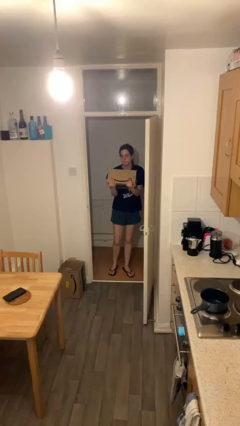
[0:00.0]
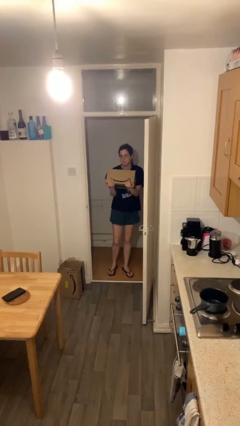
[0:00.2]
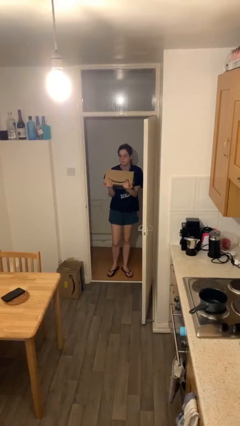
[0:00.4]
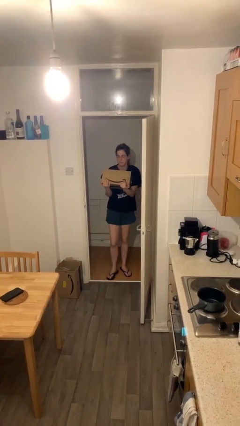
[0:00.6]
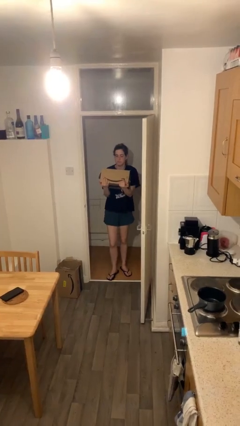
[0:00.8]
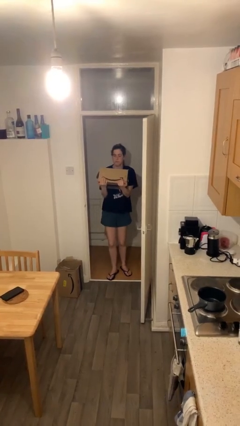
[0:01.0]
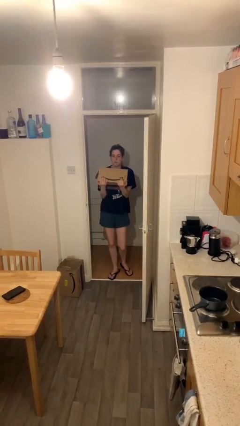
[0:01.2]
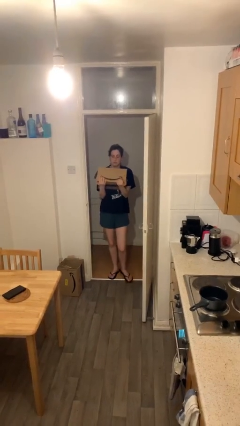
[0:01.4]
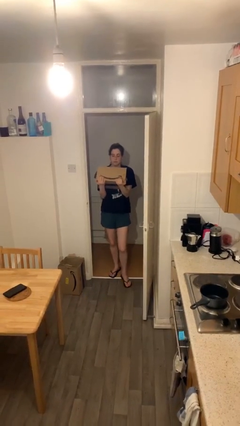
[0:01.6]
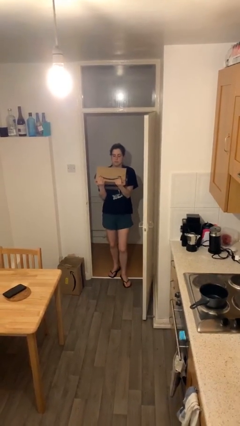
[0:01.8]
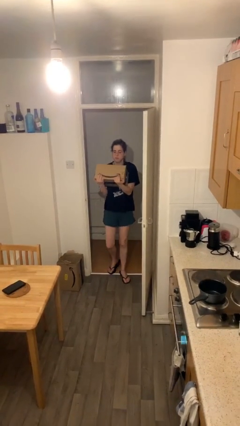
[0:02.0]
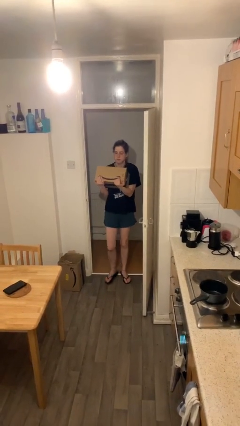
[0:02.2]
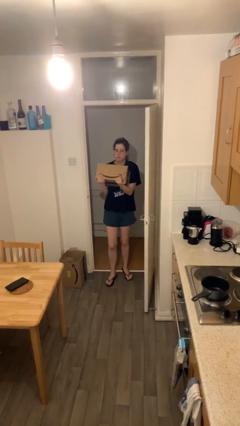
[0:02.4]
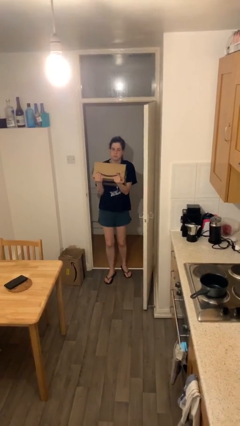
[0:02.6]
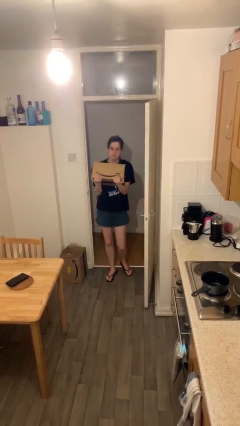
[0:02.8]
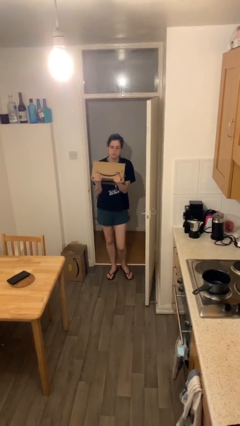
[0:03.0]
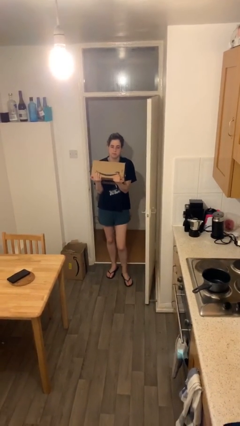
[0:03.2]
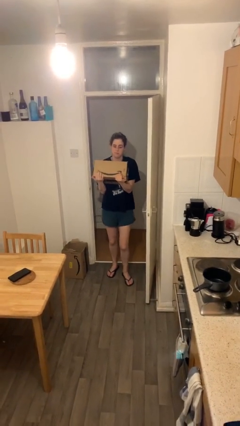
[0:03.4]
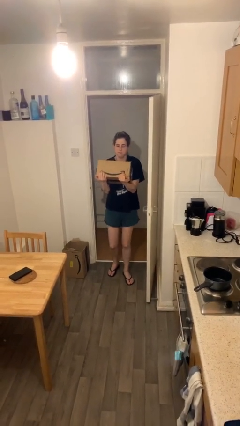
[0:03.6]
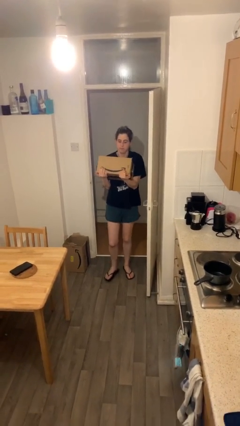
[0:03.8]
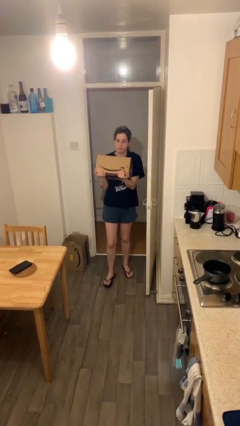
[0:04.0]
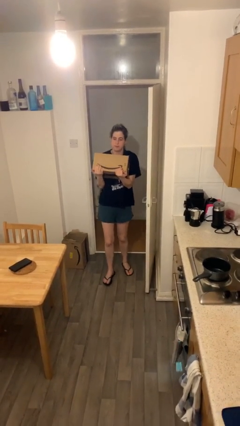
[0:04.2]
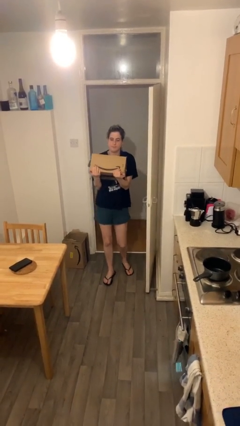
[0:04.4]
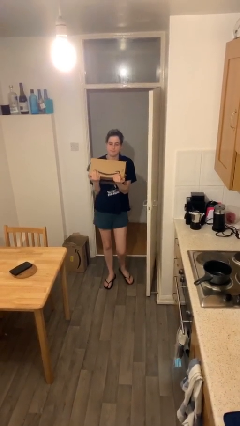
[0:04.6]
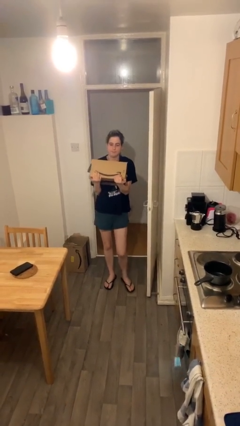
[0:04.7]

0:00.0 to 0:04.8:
person carries heavy object

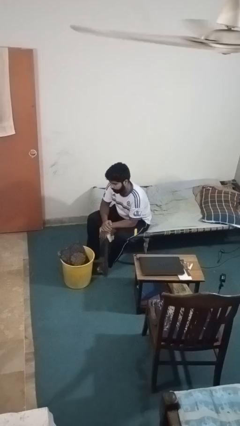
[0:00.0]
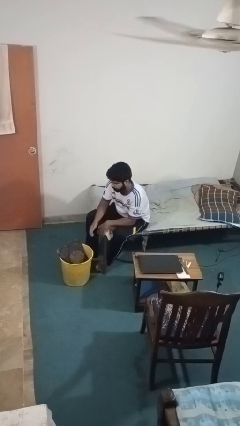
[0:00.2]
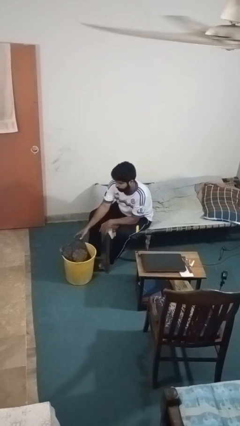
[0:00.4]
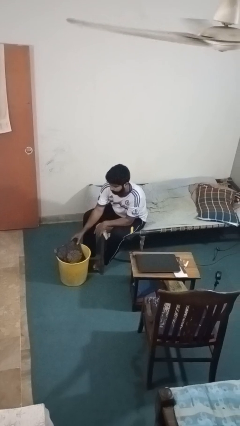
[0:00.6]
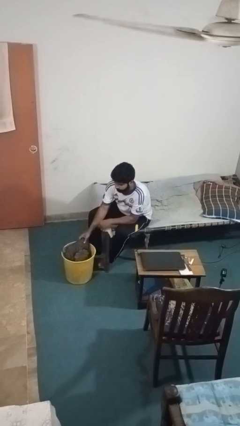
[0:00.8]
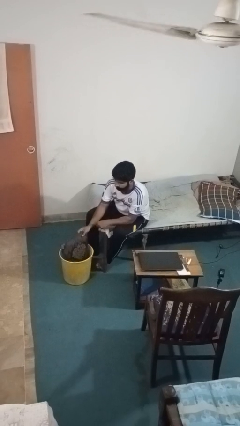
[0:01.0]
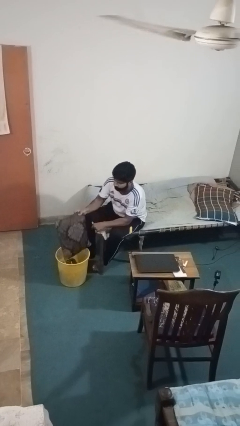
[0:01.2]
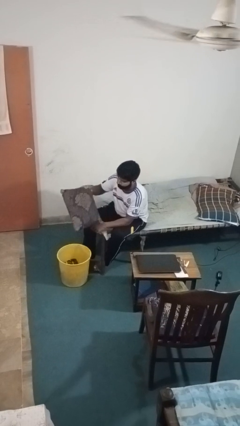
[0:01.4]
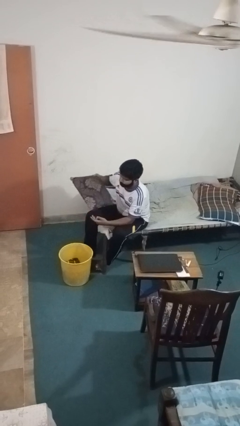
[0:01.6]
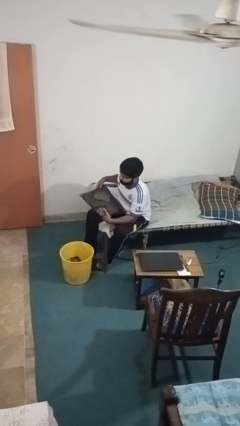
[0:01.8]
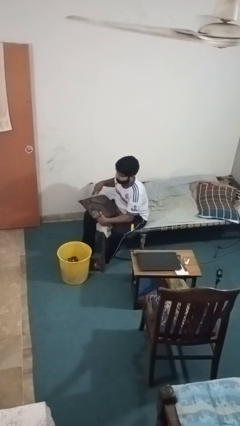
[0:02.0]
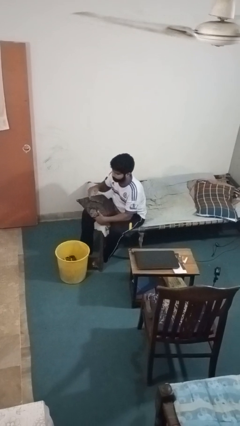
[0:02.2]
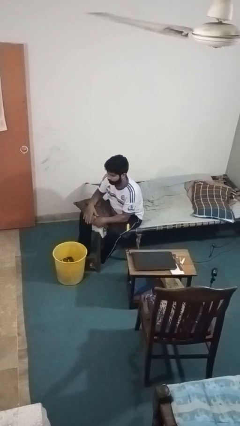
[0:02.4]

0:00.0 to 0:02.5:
person takes object from basket

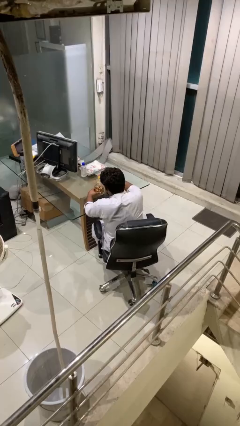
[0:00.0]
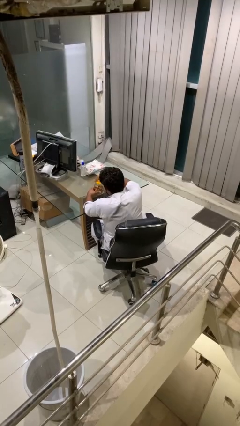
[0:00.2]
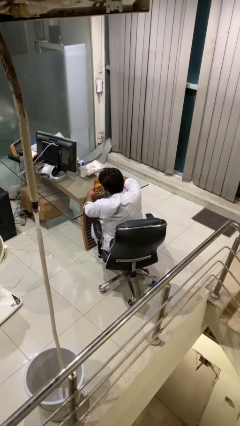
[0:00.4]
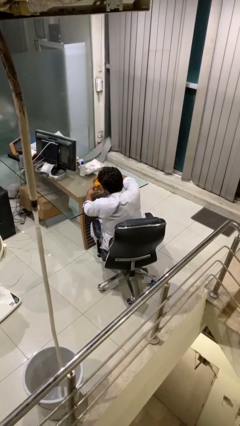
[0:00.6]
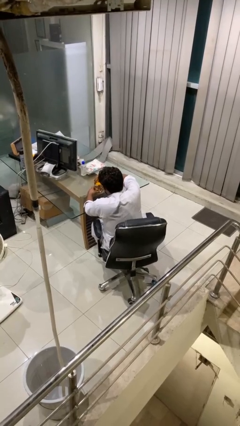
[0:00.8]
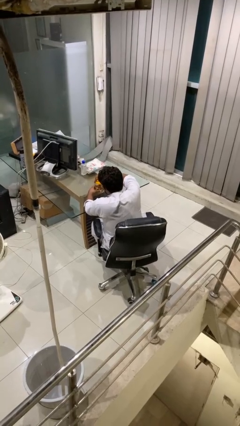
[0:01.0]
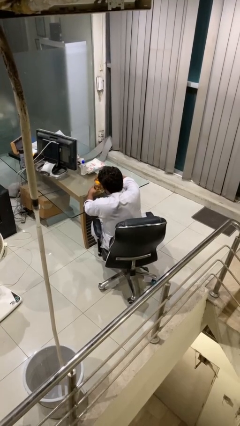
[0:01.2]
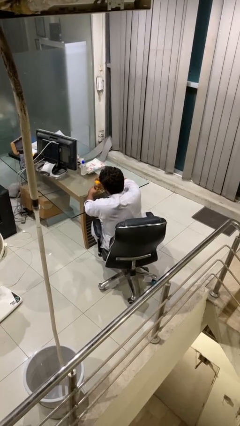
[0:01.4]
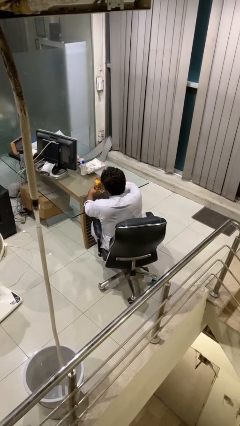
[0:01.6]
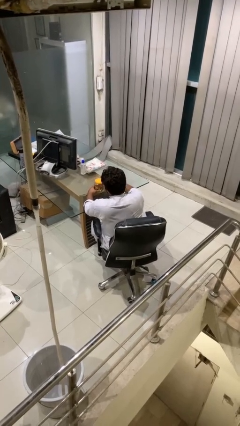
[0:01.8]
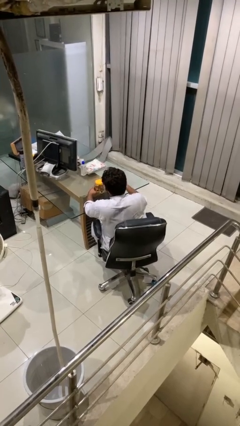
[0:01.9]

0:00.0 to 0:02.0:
person closes jar

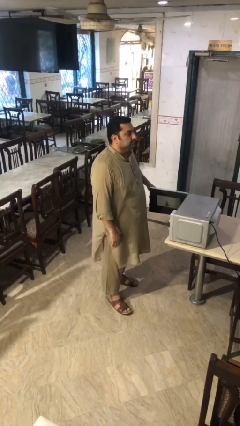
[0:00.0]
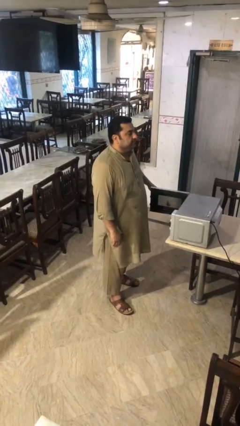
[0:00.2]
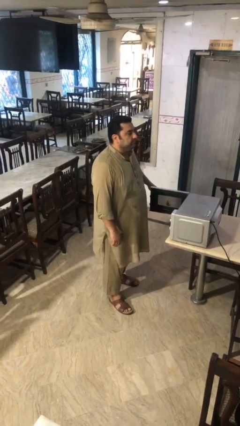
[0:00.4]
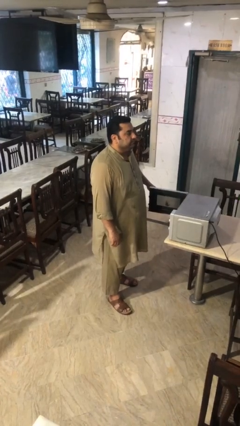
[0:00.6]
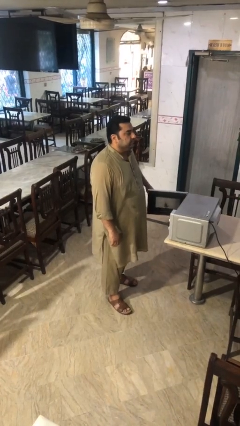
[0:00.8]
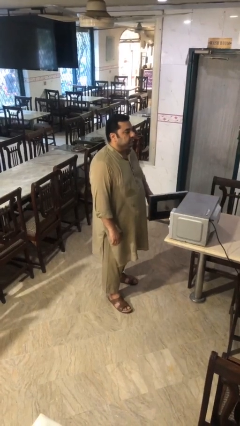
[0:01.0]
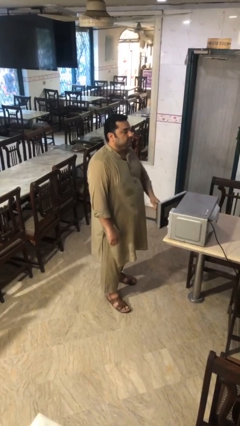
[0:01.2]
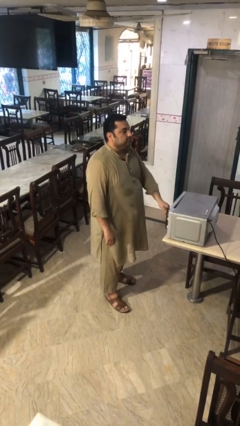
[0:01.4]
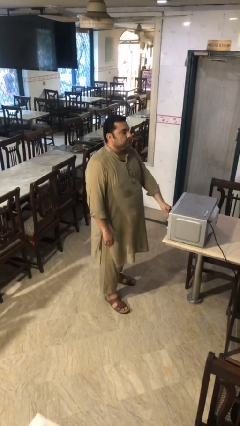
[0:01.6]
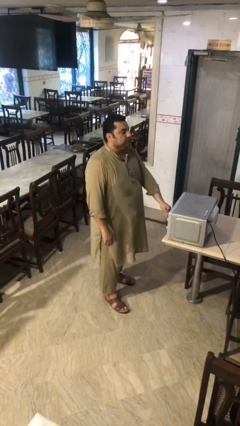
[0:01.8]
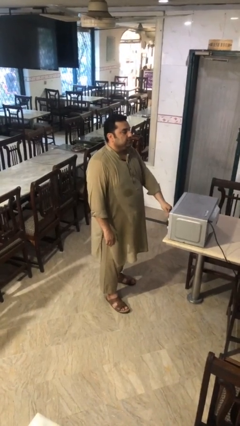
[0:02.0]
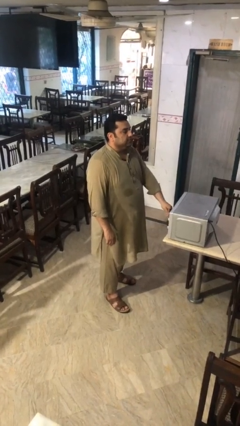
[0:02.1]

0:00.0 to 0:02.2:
person closes microwave

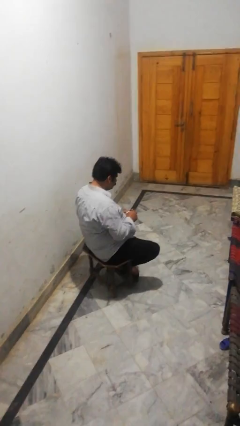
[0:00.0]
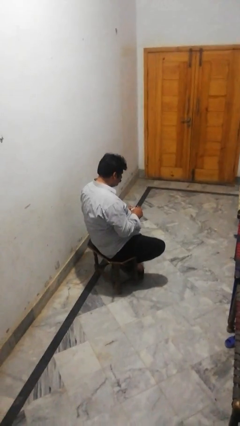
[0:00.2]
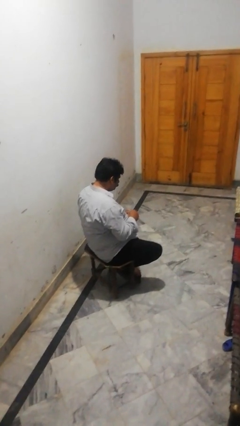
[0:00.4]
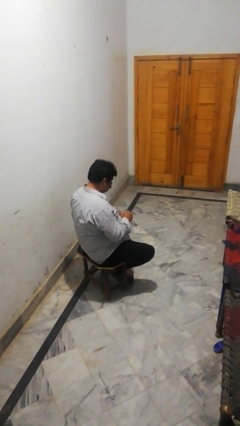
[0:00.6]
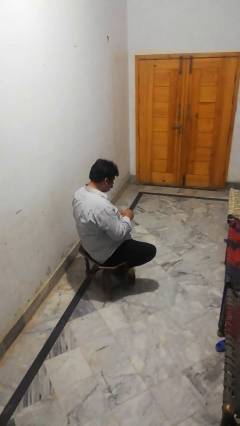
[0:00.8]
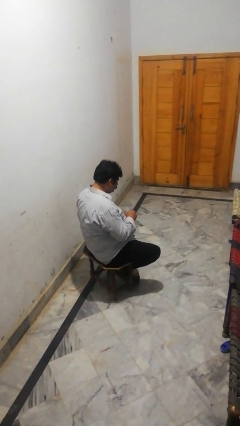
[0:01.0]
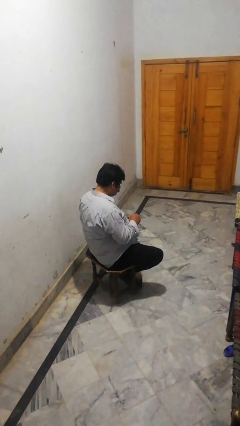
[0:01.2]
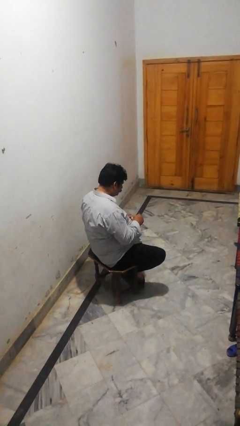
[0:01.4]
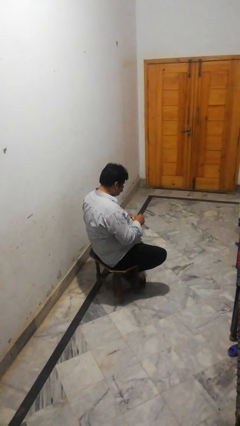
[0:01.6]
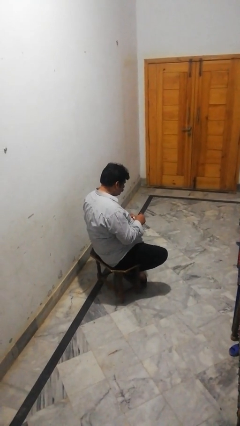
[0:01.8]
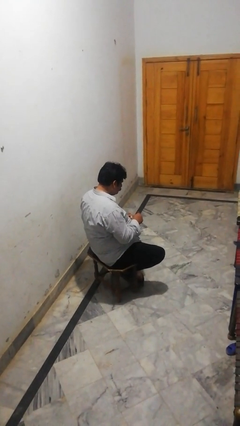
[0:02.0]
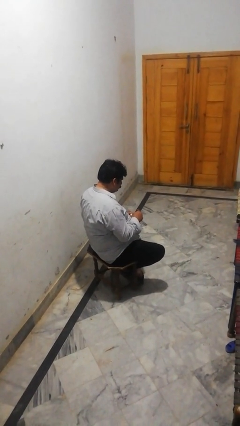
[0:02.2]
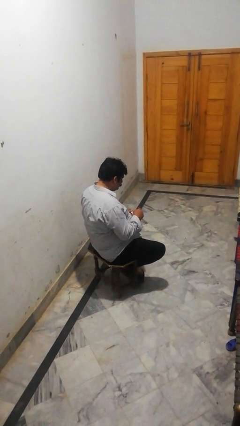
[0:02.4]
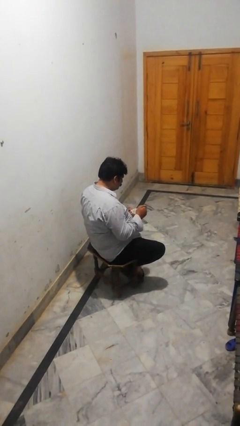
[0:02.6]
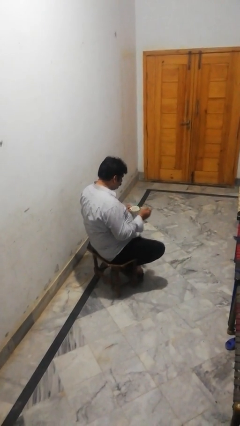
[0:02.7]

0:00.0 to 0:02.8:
person stirs mug

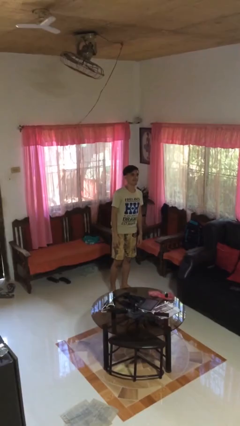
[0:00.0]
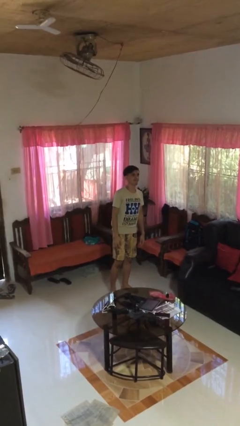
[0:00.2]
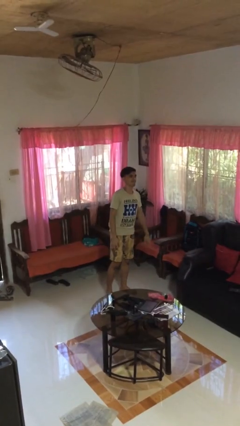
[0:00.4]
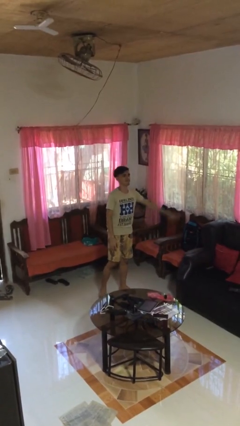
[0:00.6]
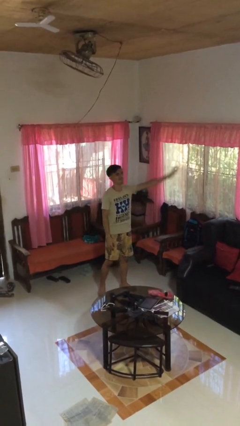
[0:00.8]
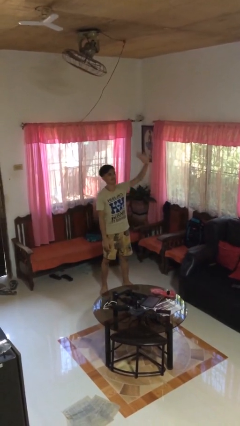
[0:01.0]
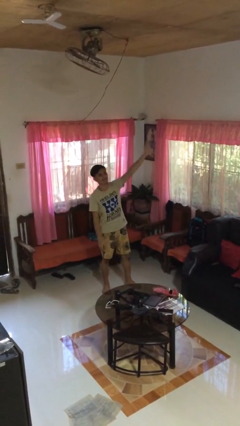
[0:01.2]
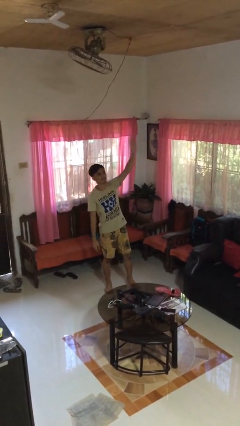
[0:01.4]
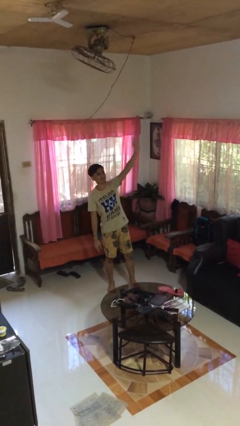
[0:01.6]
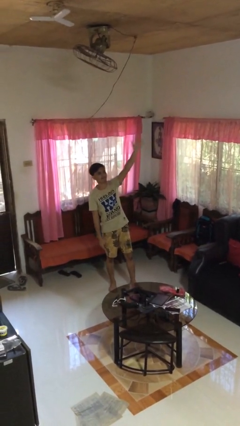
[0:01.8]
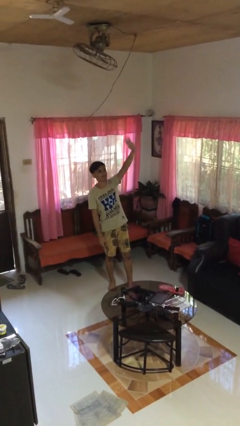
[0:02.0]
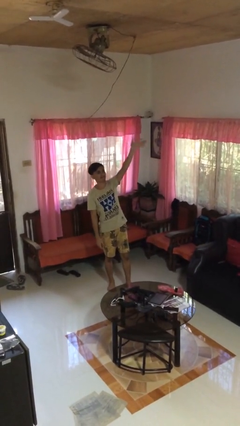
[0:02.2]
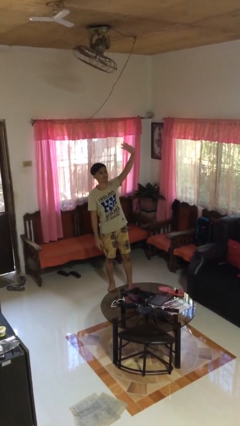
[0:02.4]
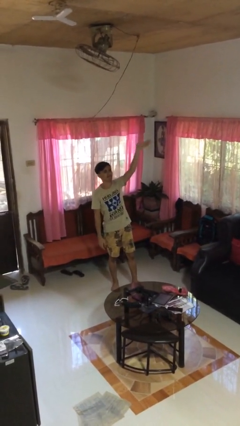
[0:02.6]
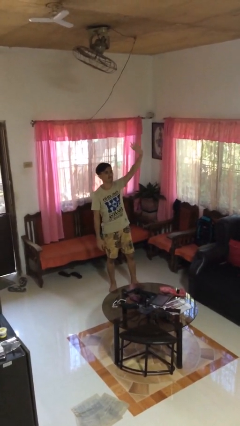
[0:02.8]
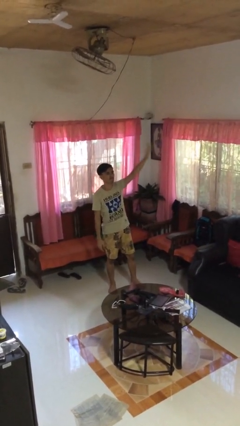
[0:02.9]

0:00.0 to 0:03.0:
person waves at person

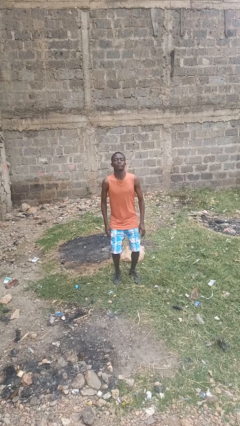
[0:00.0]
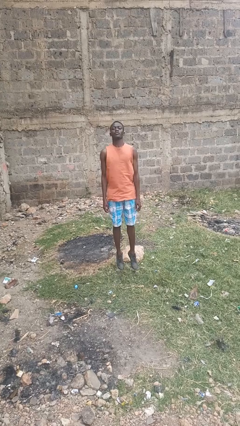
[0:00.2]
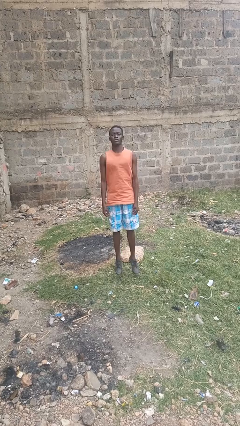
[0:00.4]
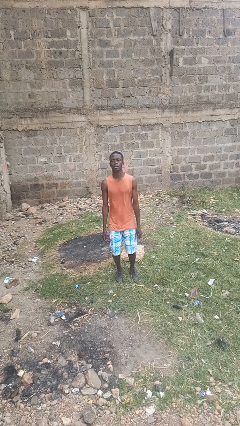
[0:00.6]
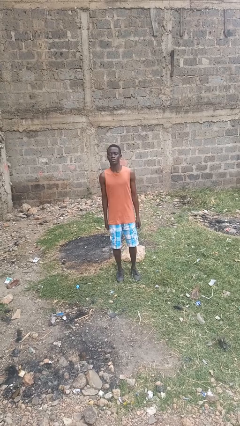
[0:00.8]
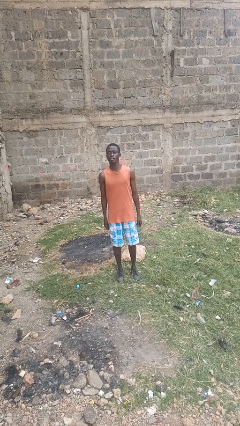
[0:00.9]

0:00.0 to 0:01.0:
person jumps
